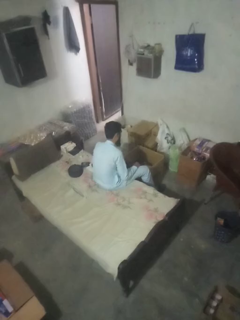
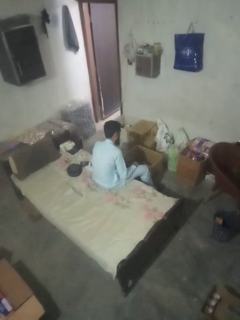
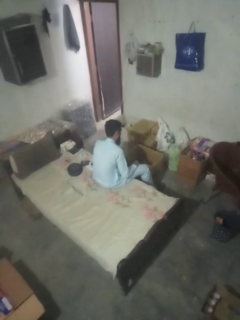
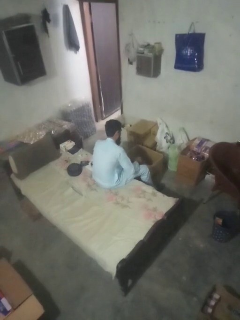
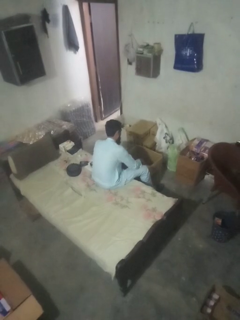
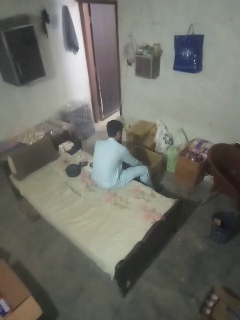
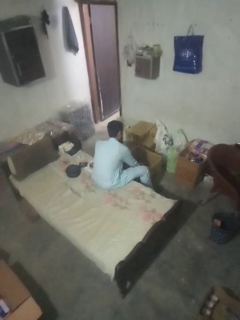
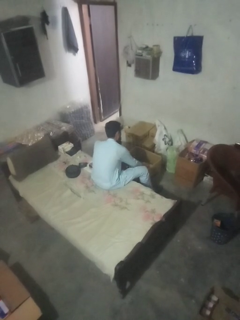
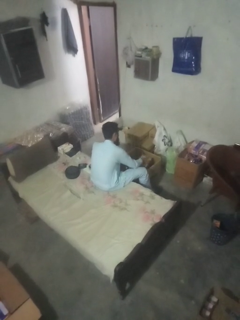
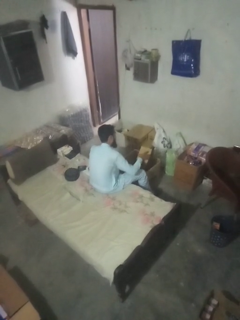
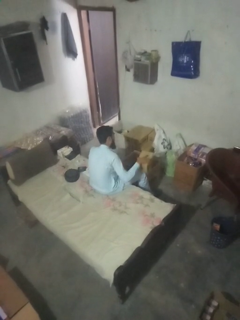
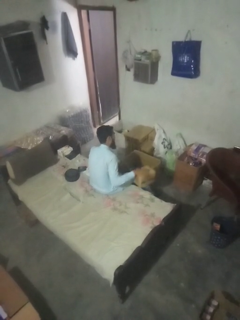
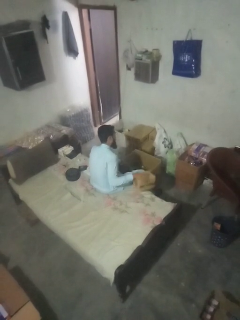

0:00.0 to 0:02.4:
person takes object from box

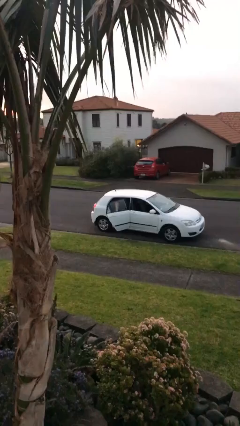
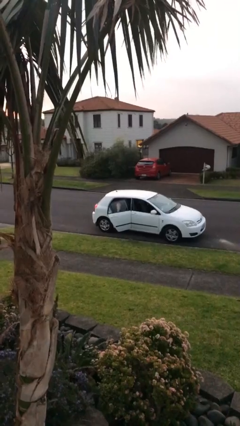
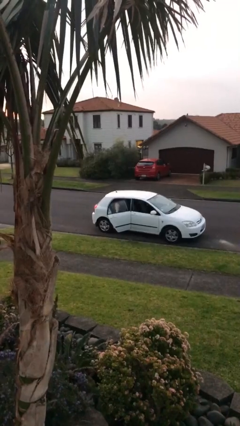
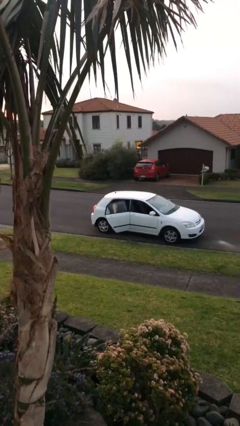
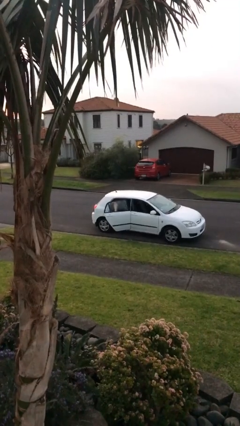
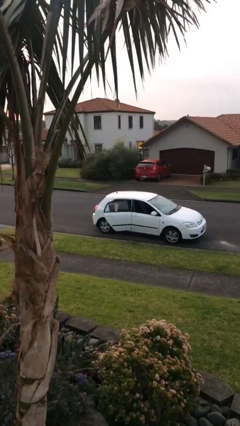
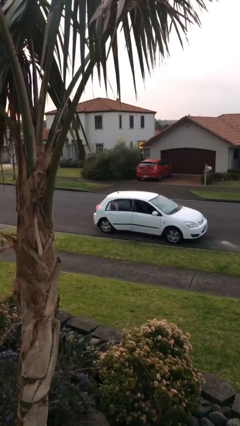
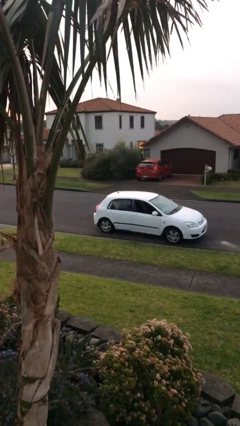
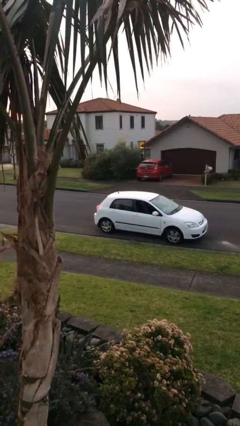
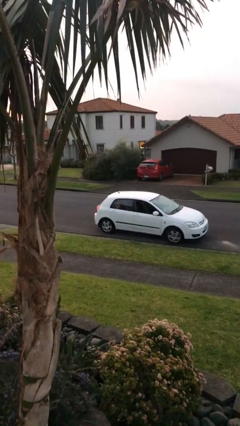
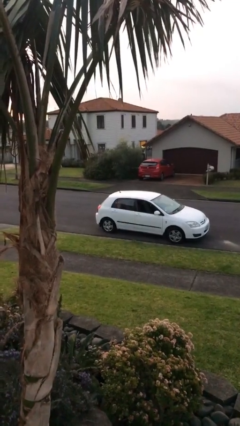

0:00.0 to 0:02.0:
person closes car door

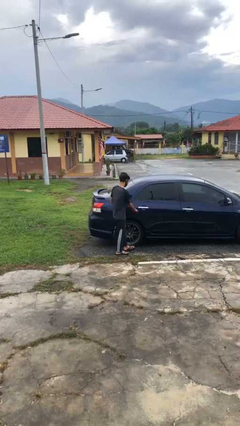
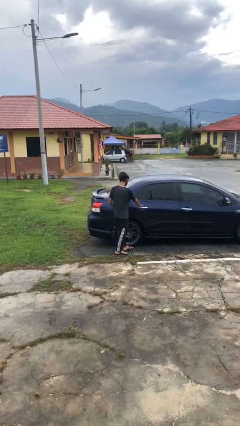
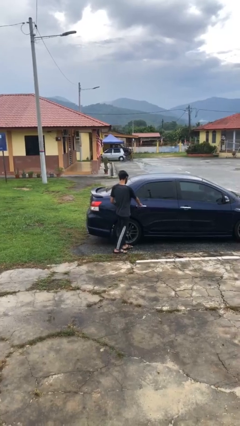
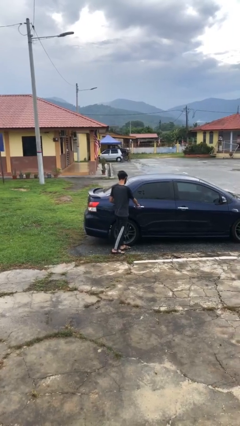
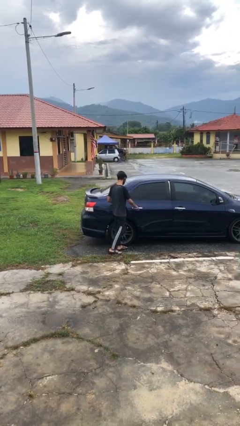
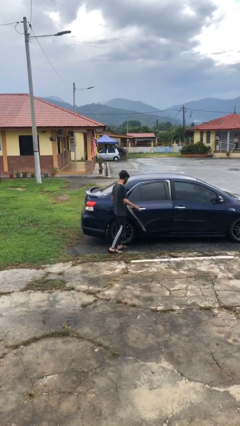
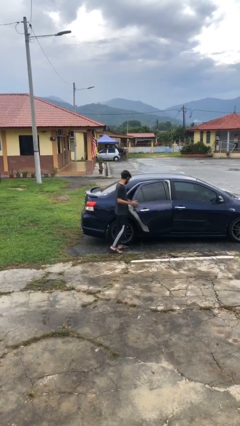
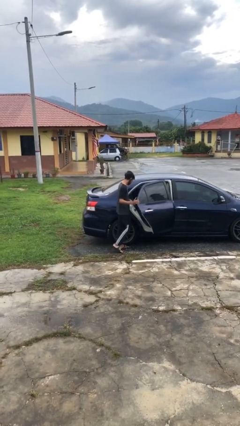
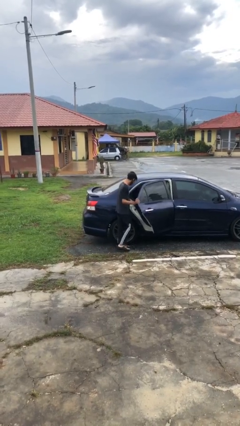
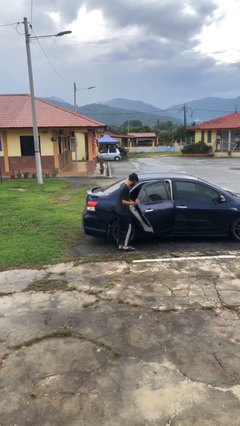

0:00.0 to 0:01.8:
person opens car door

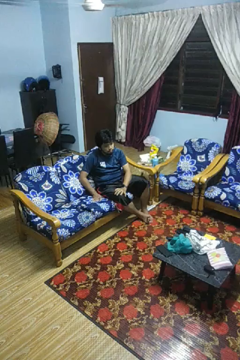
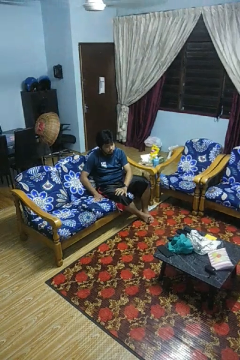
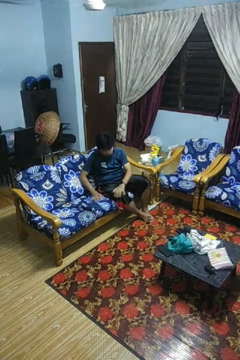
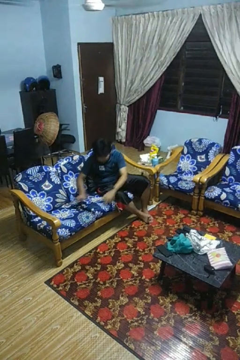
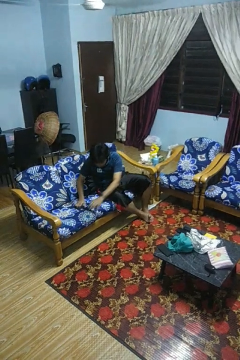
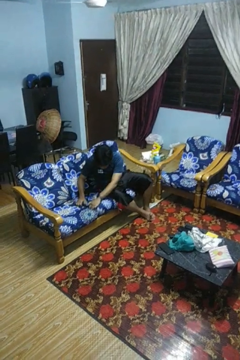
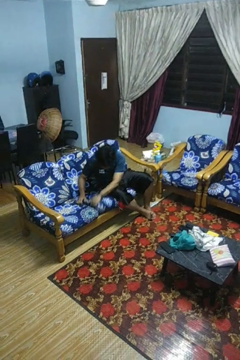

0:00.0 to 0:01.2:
person searches in couch

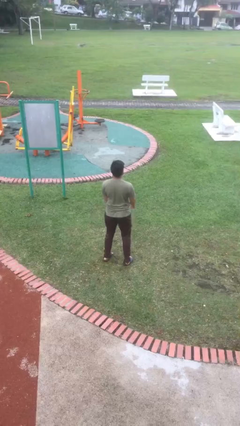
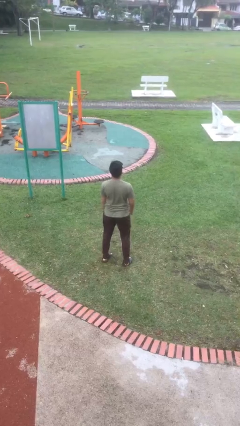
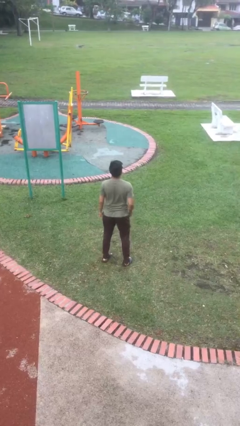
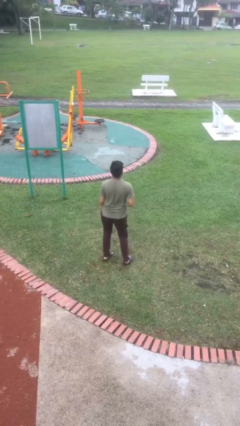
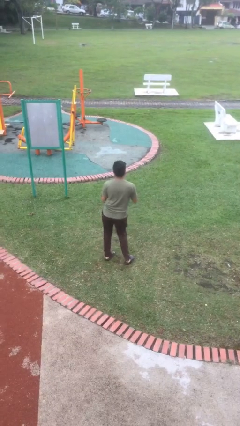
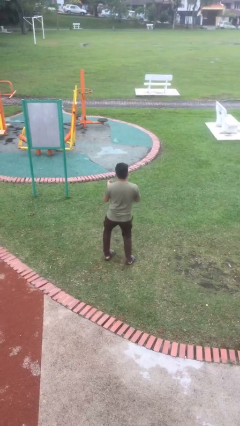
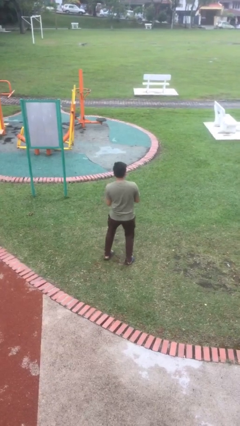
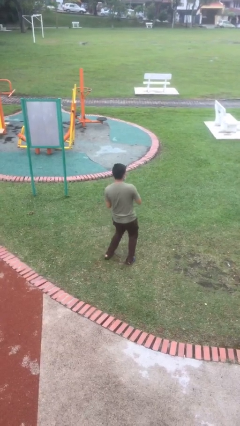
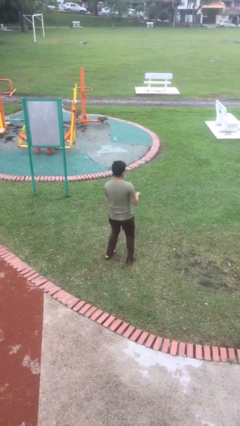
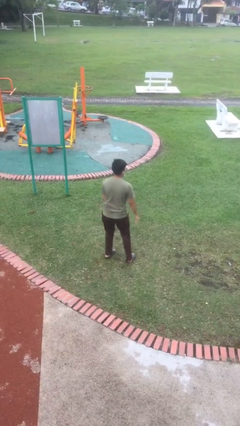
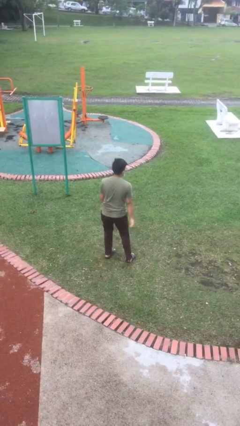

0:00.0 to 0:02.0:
person dances in place

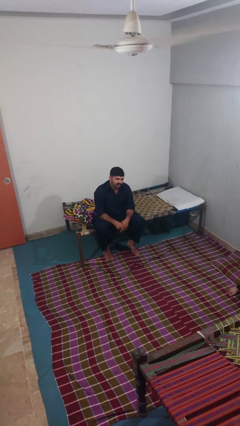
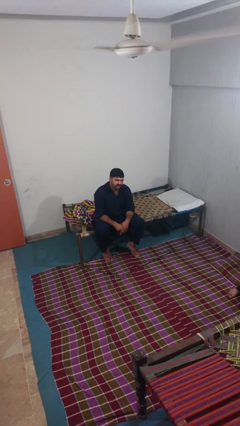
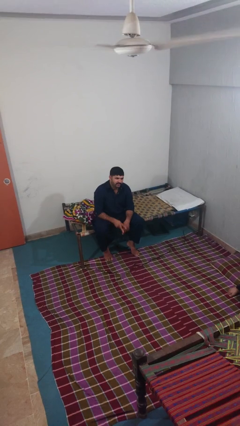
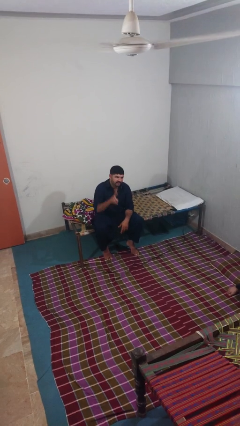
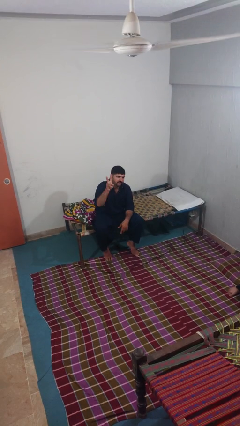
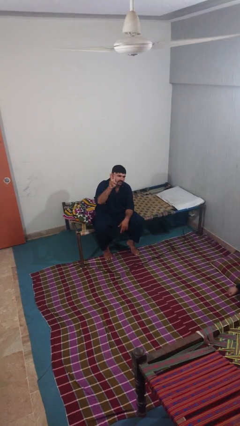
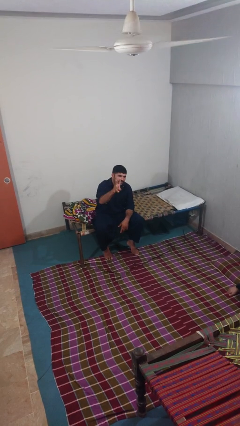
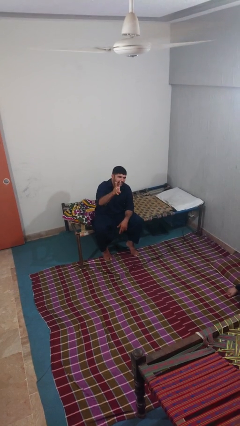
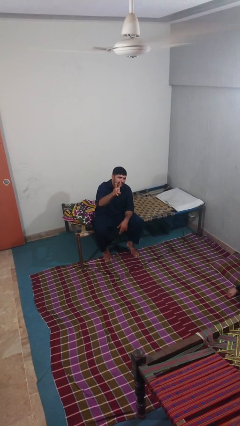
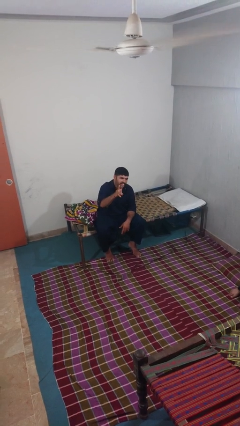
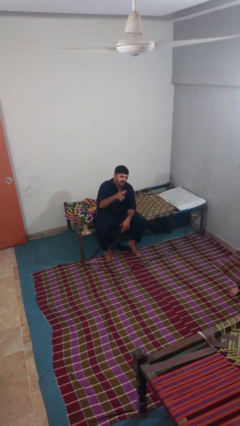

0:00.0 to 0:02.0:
person gestures peace

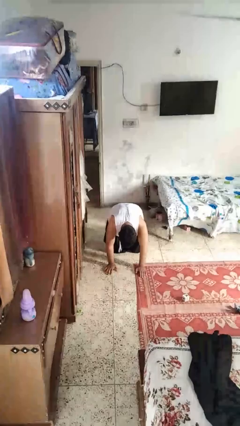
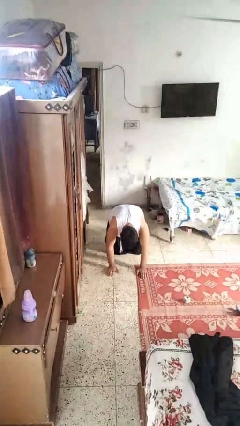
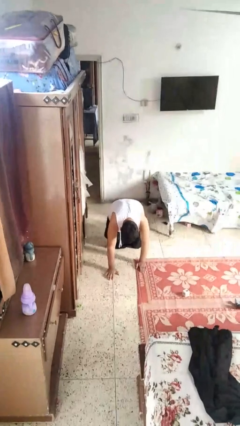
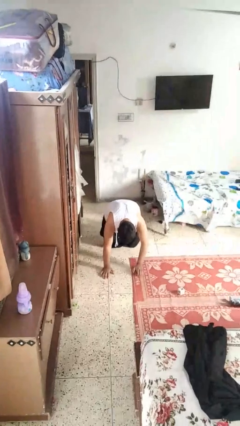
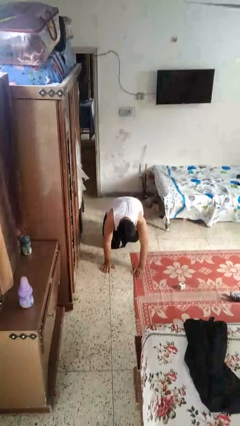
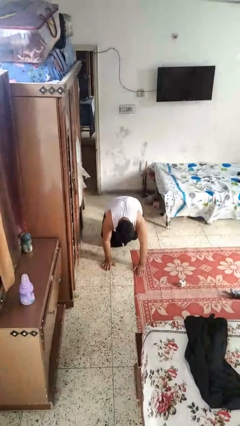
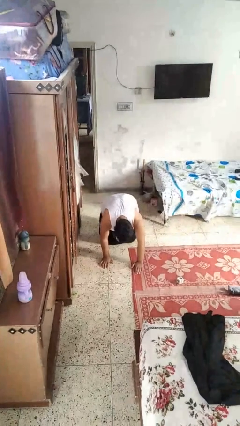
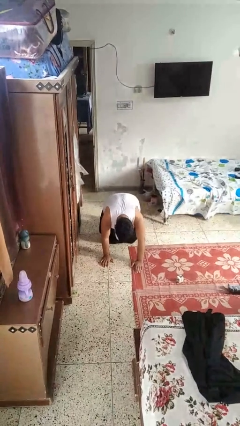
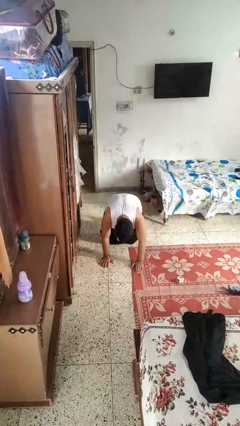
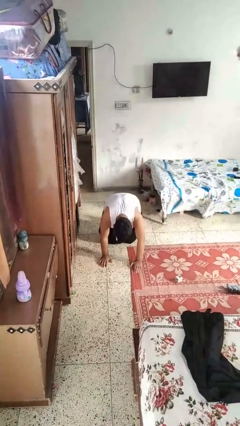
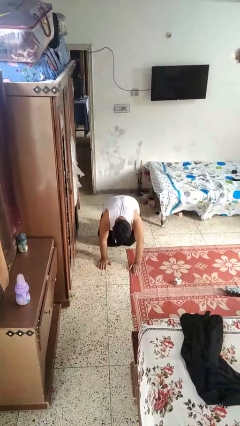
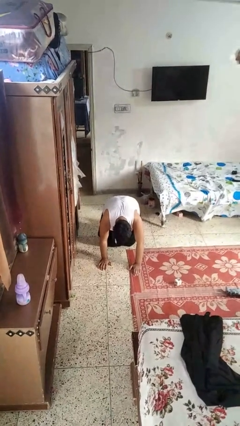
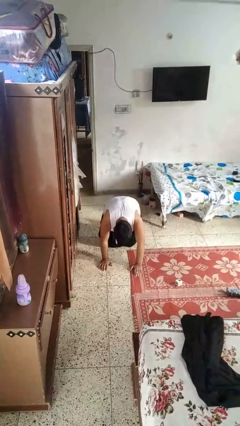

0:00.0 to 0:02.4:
person crawls

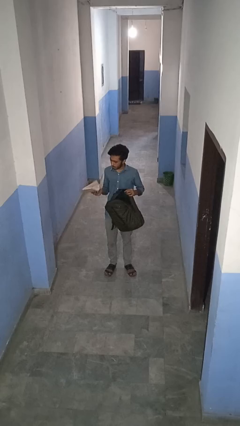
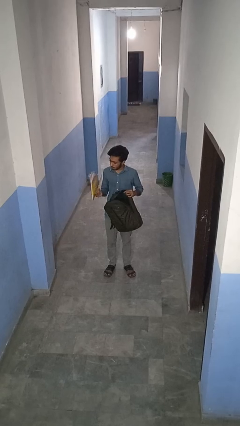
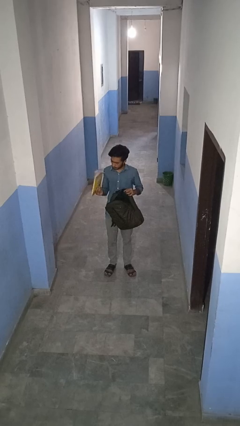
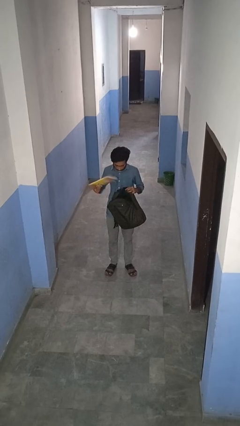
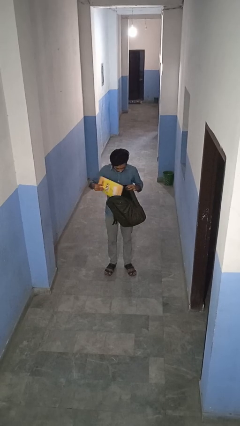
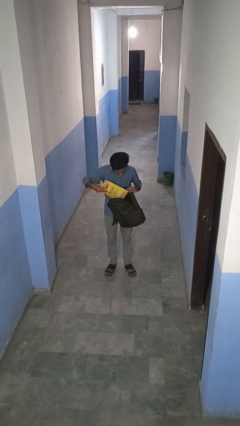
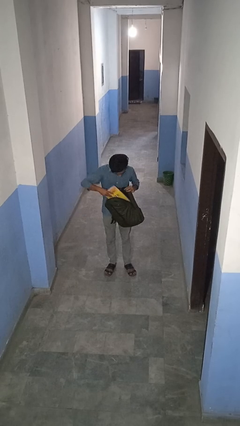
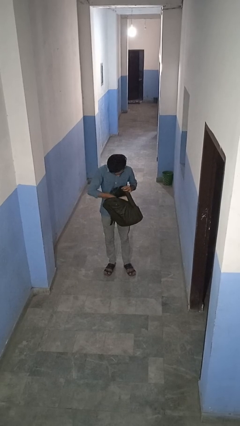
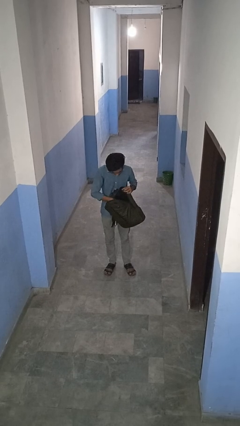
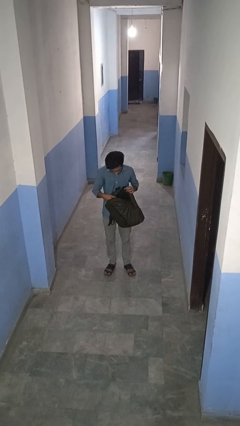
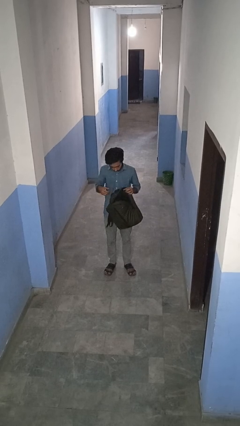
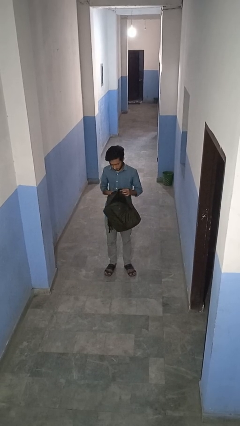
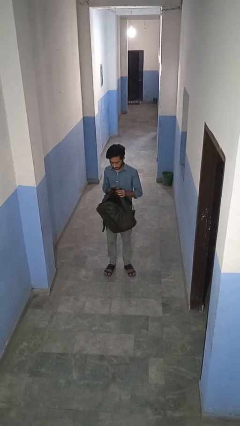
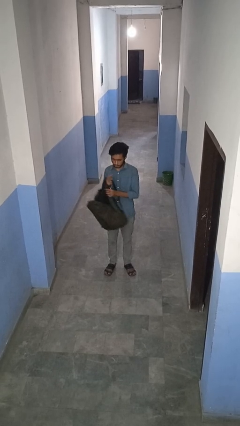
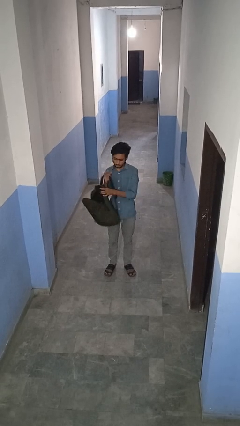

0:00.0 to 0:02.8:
person puts object into backpack

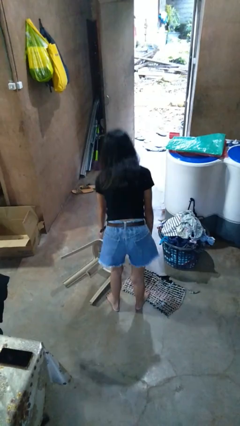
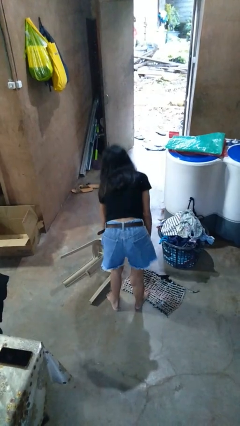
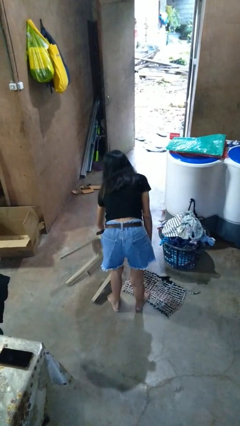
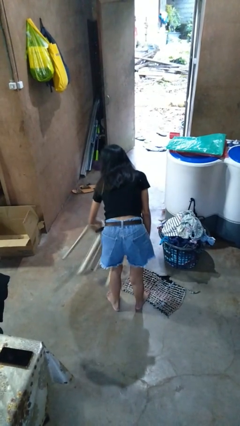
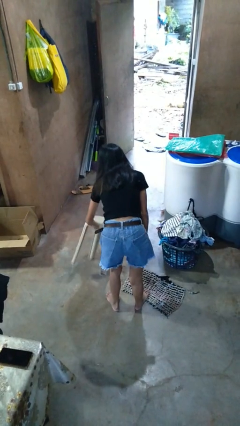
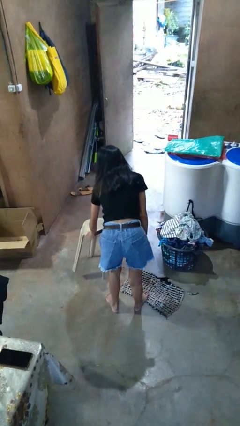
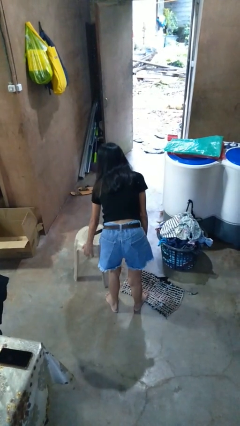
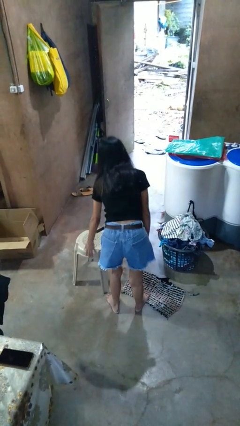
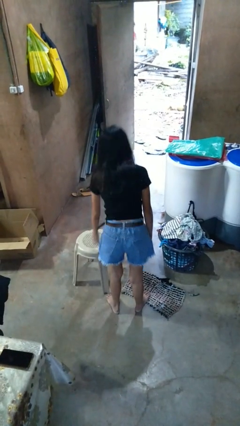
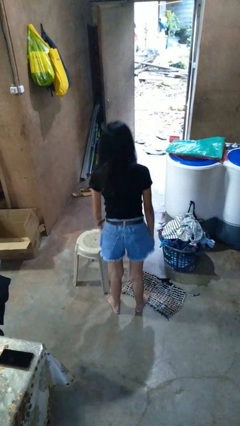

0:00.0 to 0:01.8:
person sets upright furniture
